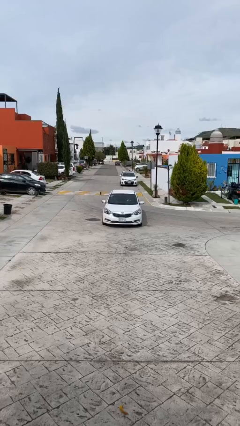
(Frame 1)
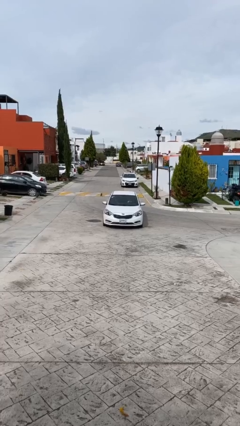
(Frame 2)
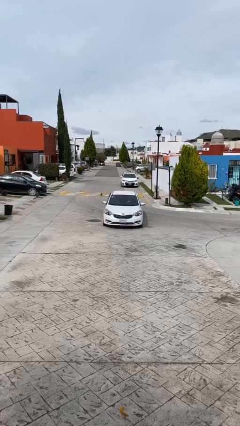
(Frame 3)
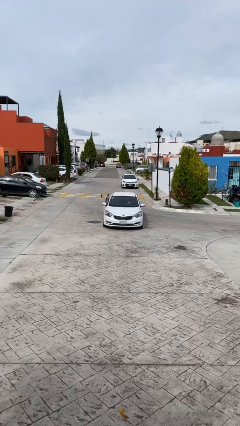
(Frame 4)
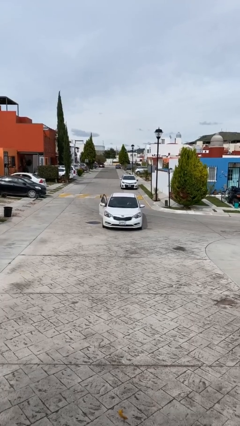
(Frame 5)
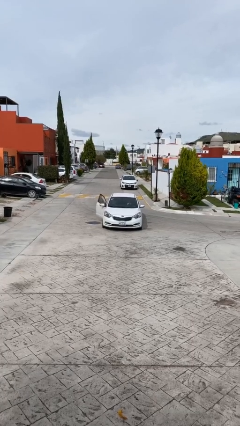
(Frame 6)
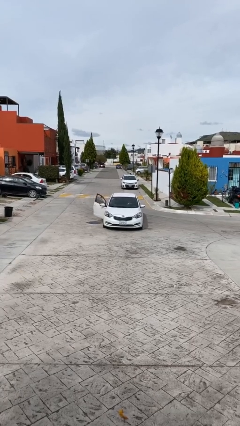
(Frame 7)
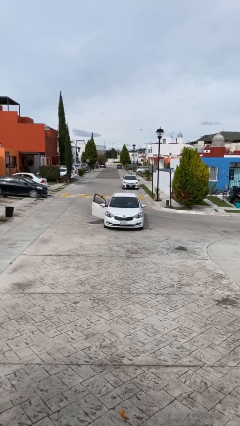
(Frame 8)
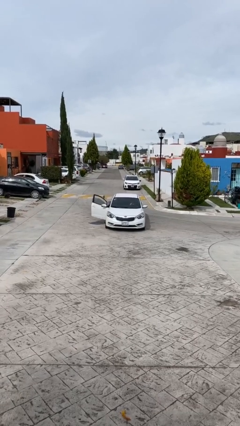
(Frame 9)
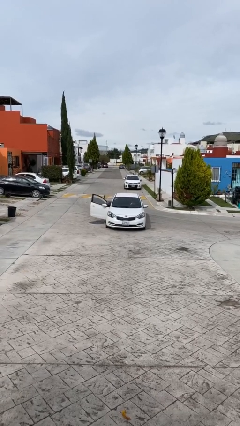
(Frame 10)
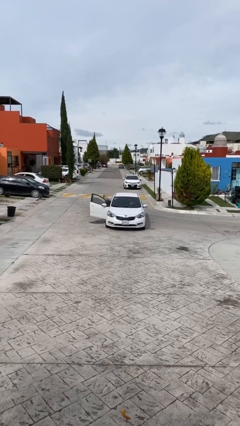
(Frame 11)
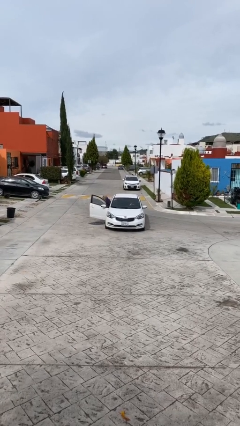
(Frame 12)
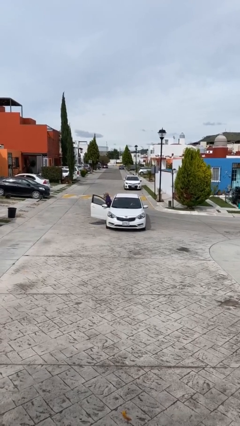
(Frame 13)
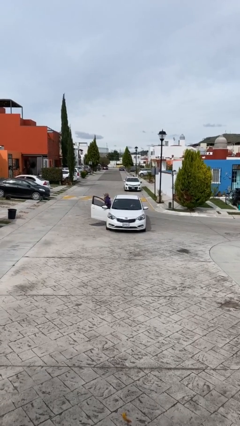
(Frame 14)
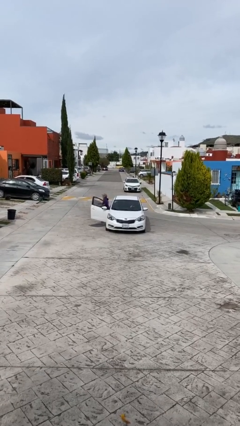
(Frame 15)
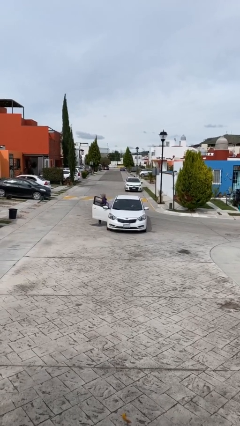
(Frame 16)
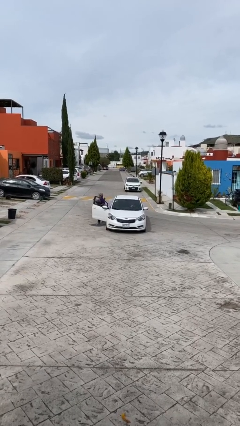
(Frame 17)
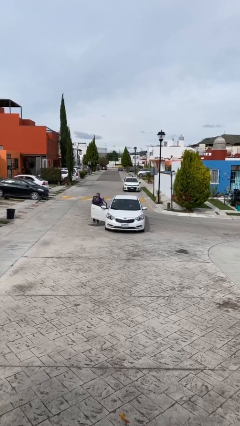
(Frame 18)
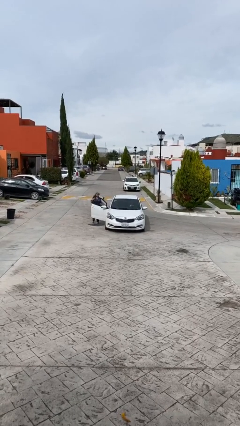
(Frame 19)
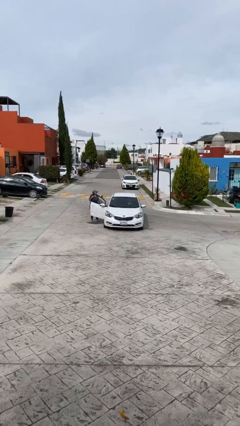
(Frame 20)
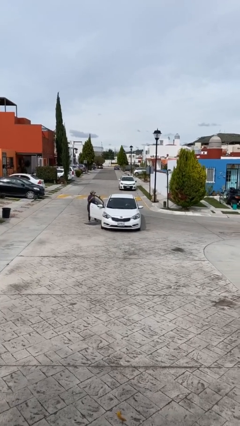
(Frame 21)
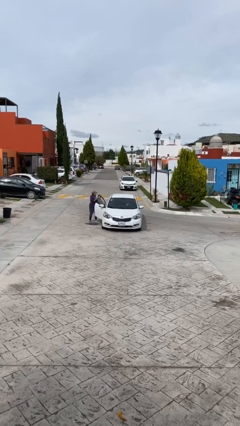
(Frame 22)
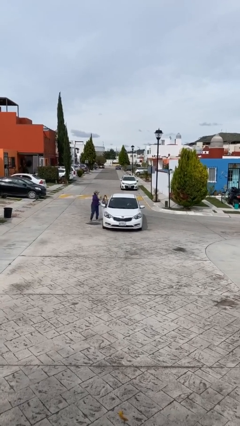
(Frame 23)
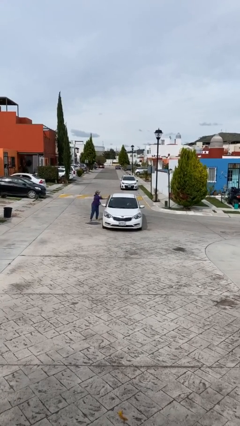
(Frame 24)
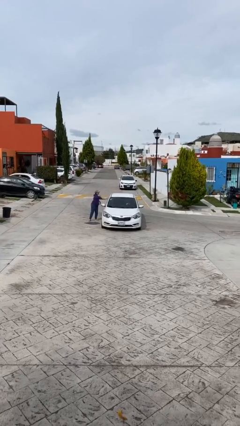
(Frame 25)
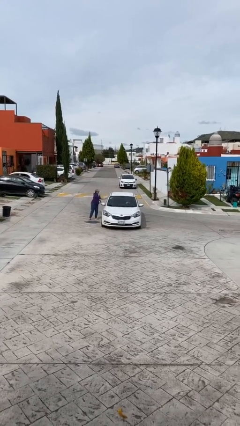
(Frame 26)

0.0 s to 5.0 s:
car drops off person

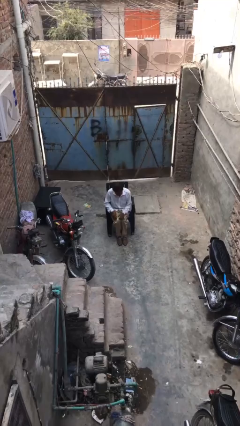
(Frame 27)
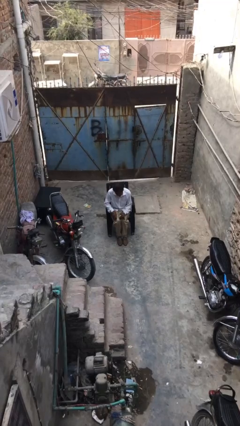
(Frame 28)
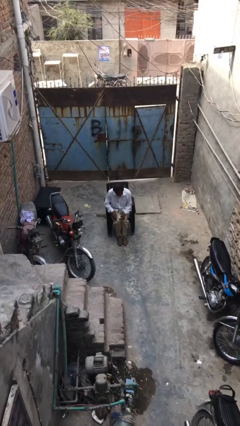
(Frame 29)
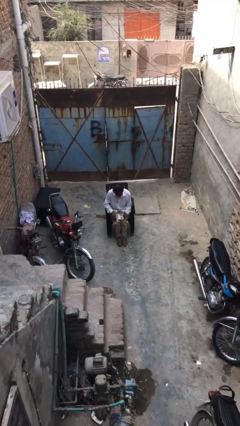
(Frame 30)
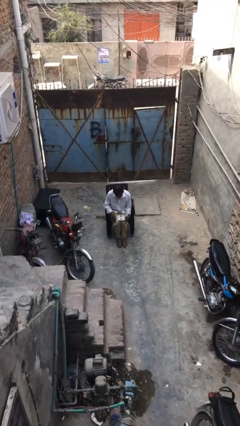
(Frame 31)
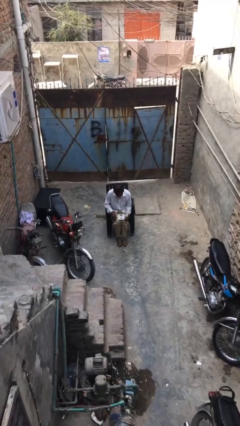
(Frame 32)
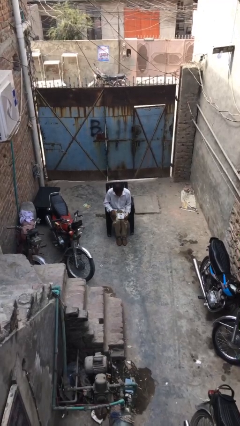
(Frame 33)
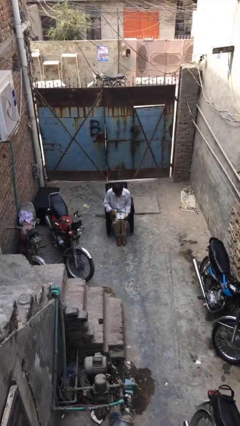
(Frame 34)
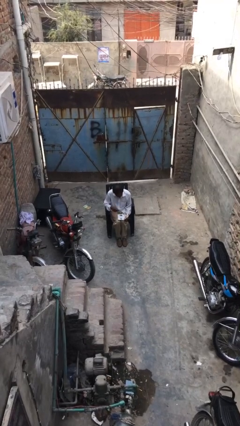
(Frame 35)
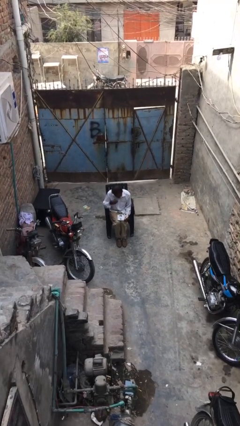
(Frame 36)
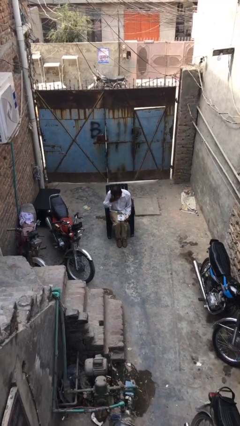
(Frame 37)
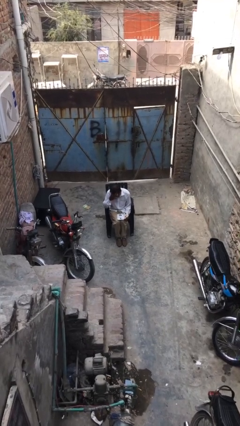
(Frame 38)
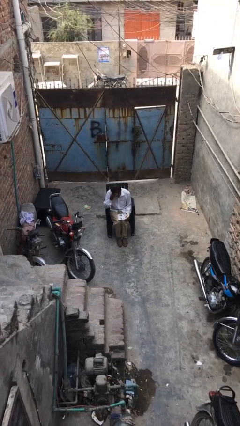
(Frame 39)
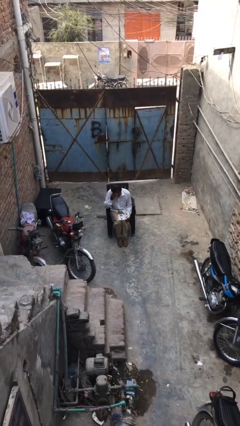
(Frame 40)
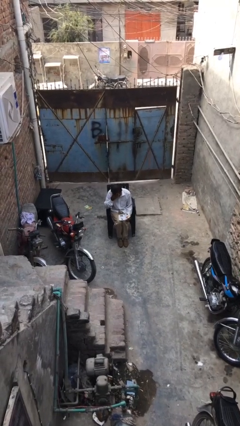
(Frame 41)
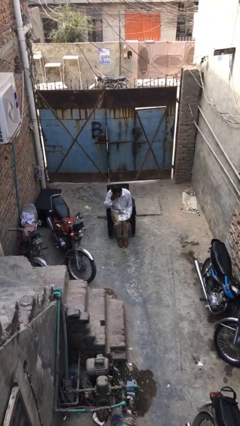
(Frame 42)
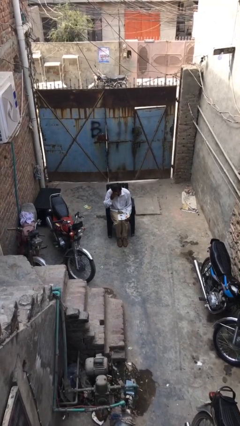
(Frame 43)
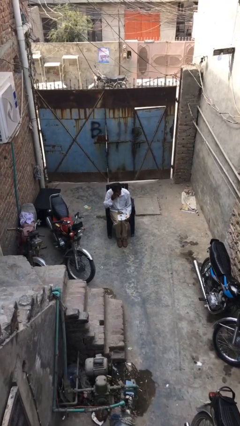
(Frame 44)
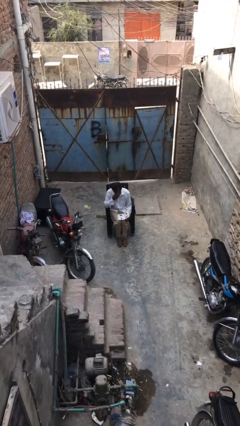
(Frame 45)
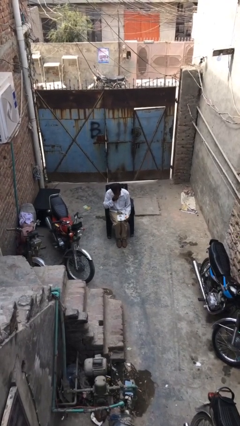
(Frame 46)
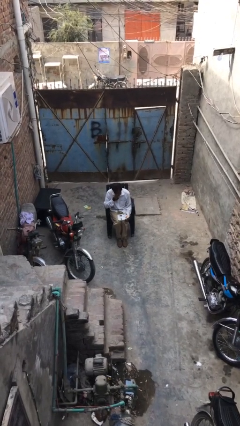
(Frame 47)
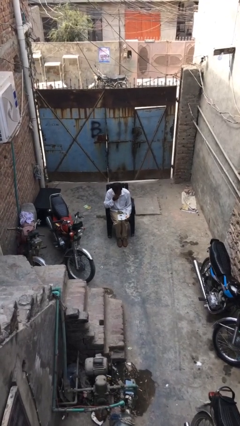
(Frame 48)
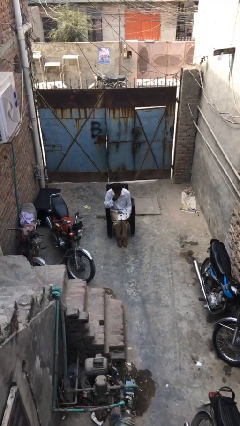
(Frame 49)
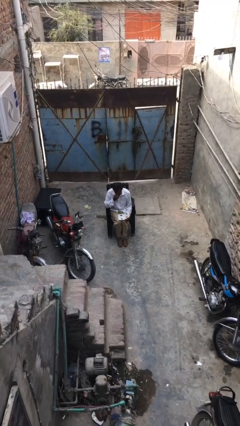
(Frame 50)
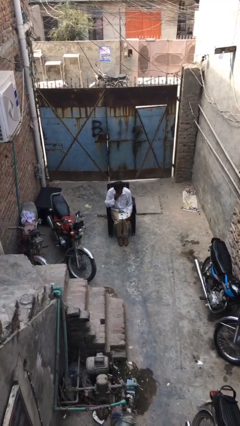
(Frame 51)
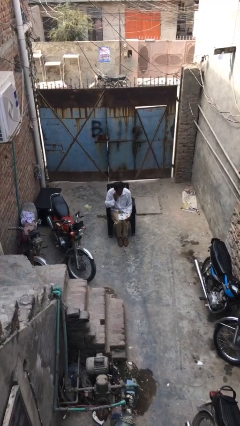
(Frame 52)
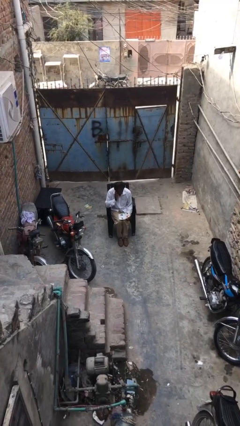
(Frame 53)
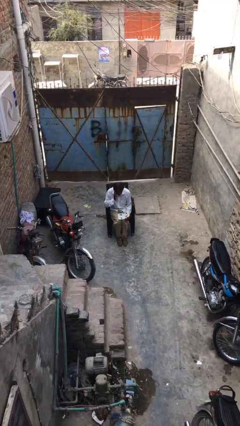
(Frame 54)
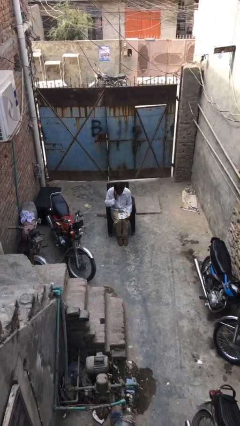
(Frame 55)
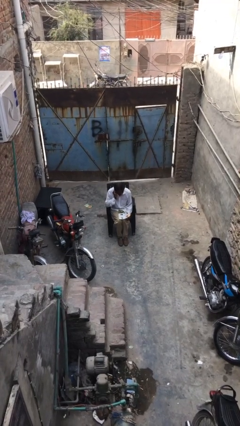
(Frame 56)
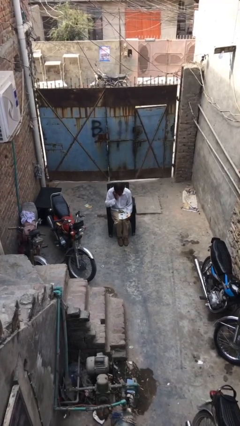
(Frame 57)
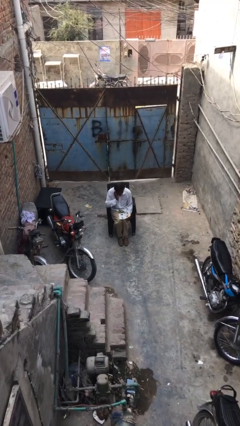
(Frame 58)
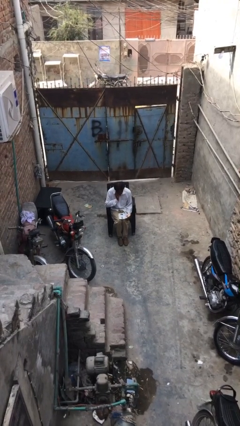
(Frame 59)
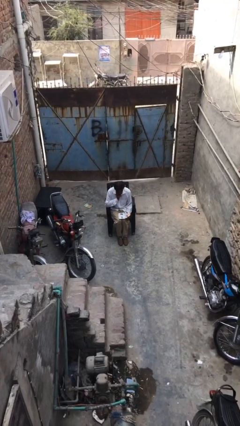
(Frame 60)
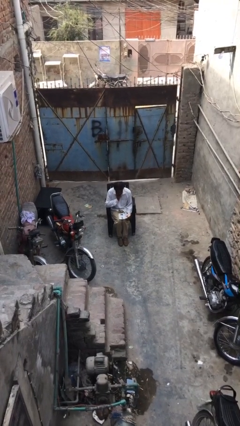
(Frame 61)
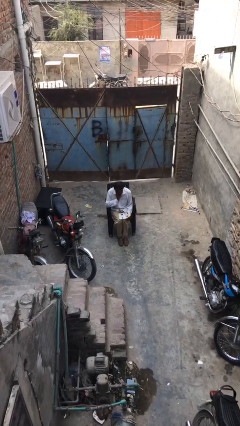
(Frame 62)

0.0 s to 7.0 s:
person reads document

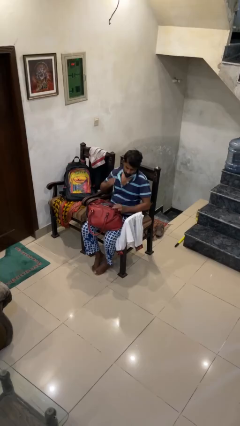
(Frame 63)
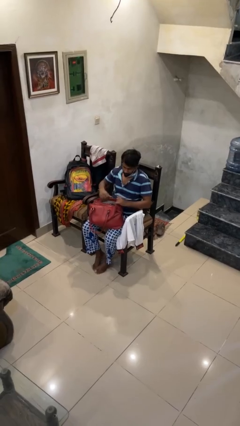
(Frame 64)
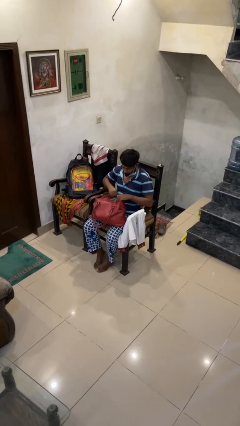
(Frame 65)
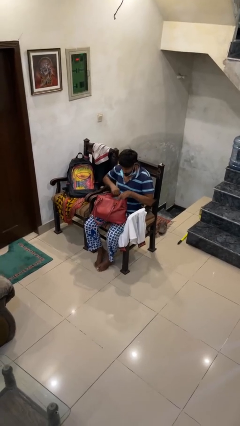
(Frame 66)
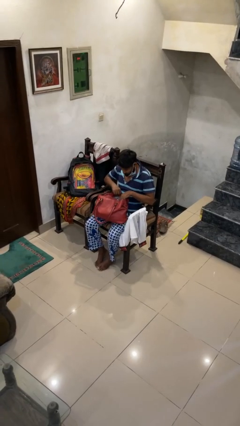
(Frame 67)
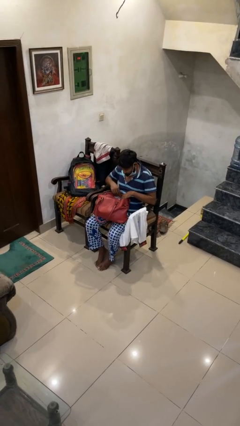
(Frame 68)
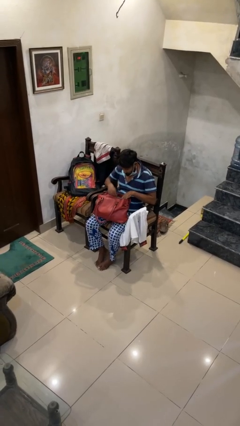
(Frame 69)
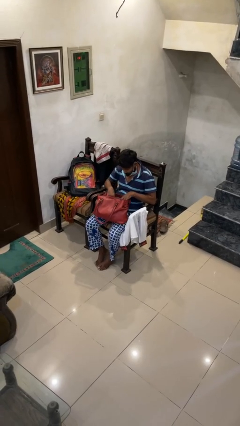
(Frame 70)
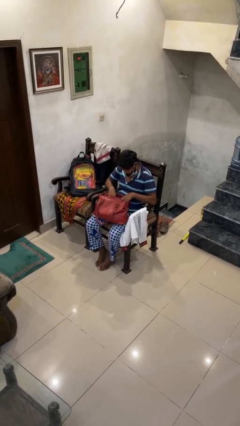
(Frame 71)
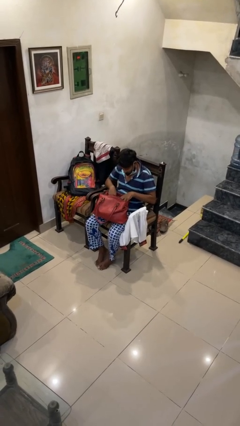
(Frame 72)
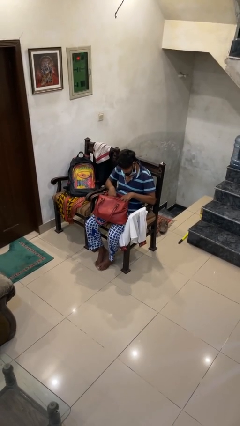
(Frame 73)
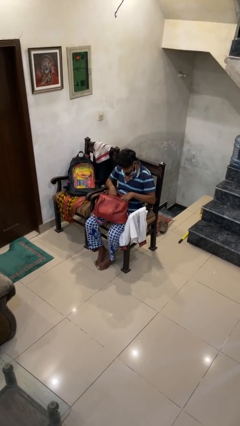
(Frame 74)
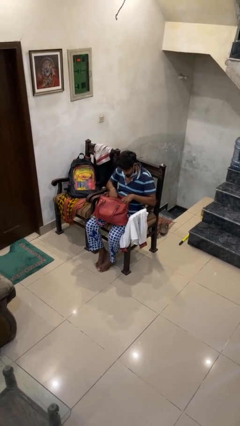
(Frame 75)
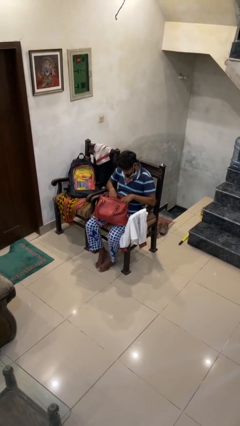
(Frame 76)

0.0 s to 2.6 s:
person searches in purse

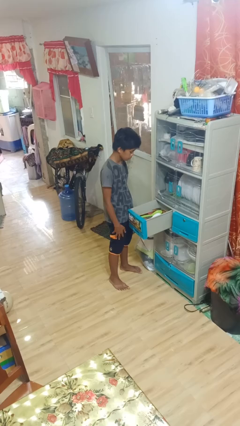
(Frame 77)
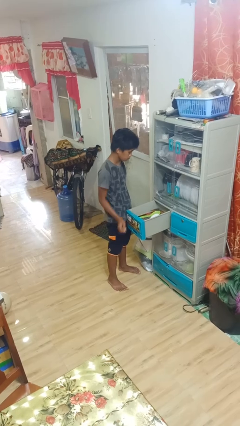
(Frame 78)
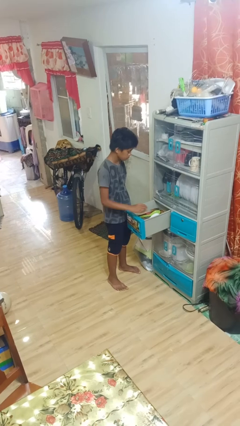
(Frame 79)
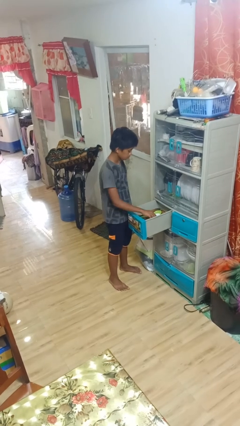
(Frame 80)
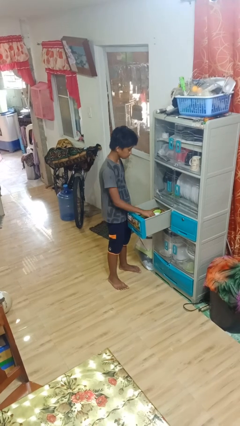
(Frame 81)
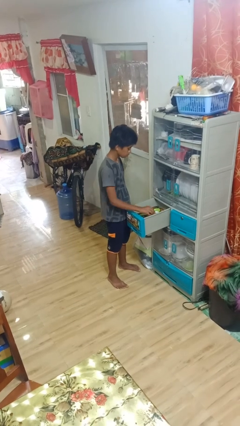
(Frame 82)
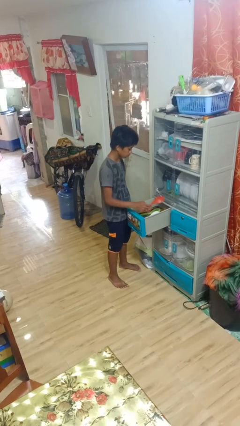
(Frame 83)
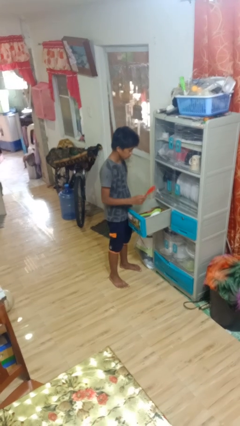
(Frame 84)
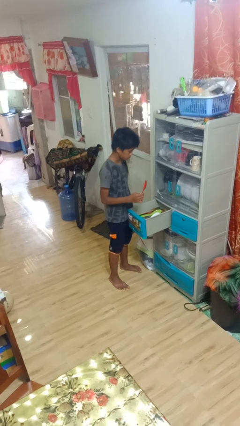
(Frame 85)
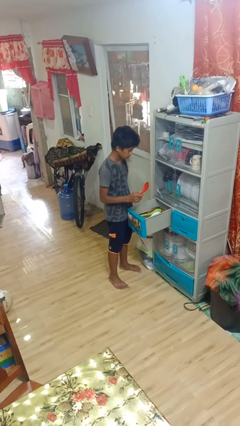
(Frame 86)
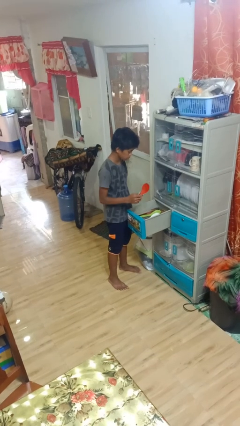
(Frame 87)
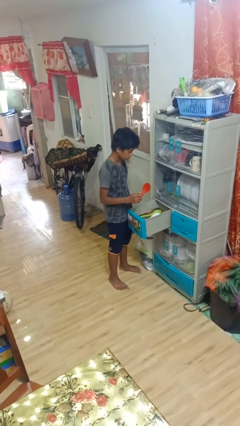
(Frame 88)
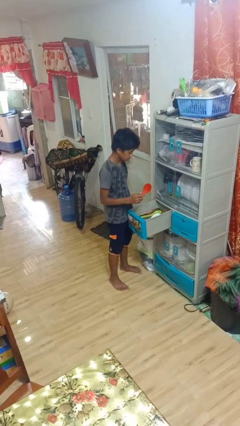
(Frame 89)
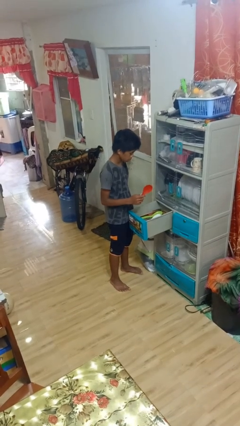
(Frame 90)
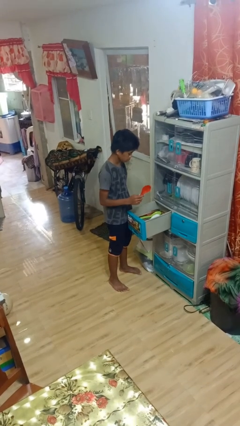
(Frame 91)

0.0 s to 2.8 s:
person takes object from kitchen drawer

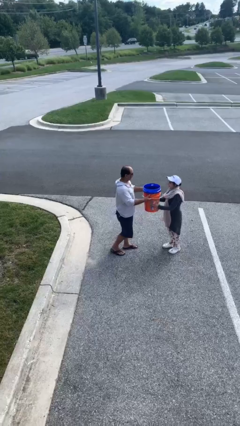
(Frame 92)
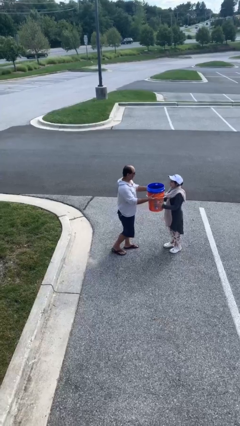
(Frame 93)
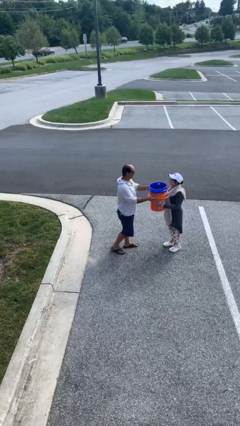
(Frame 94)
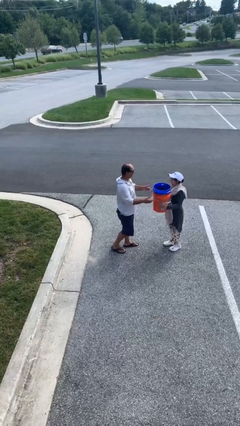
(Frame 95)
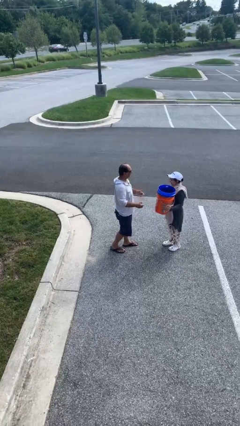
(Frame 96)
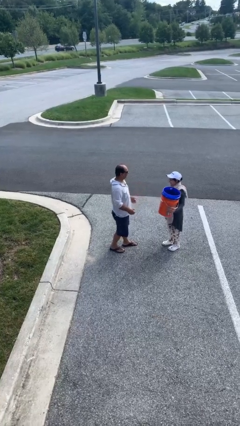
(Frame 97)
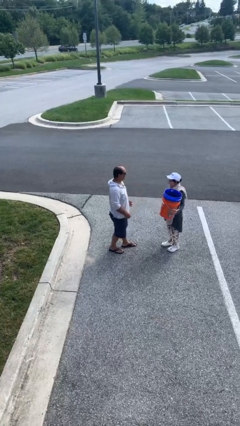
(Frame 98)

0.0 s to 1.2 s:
person transfers object to person
